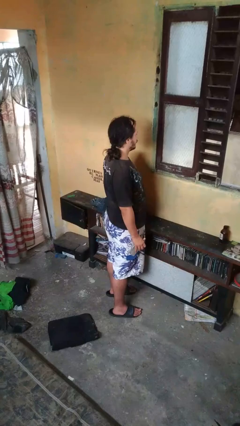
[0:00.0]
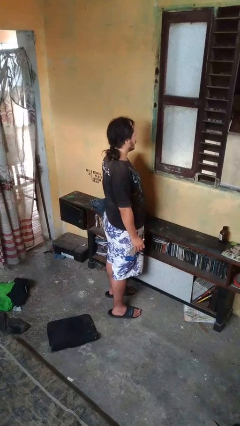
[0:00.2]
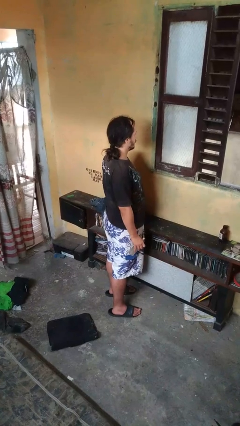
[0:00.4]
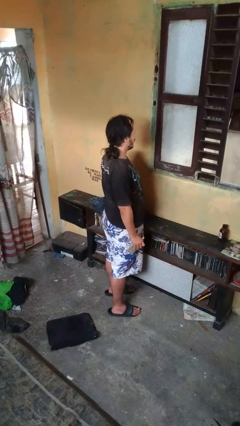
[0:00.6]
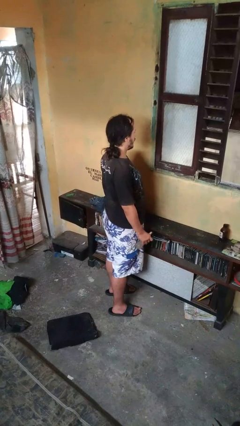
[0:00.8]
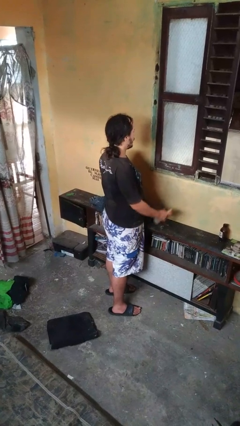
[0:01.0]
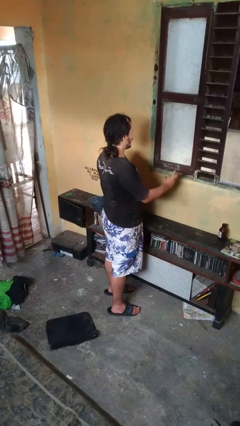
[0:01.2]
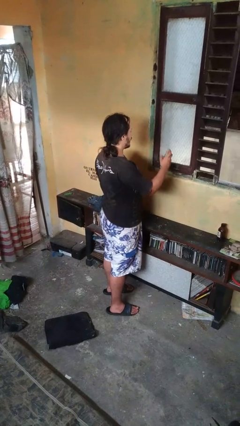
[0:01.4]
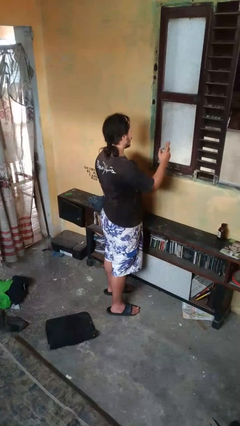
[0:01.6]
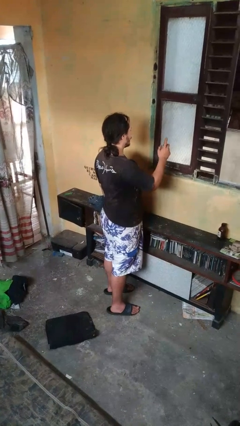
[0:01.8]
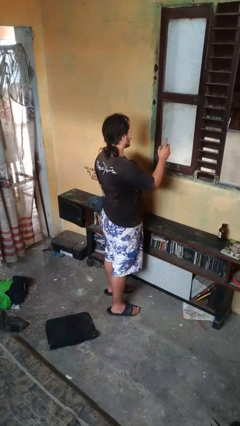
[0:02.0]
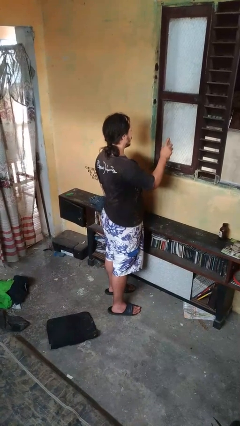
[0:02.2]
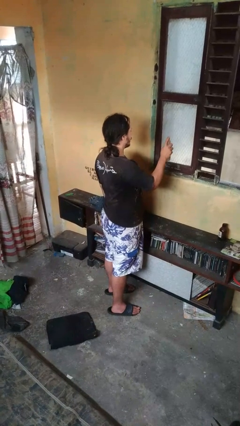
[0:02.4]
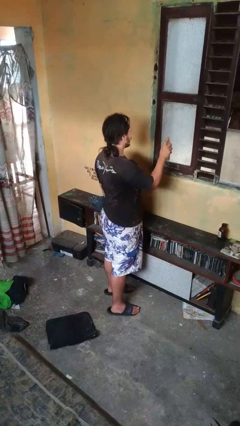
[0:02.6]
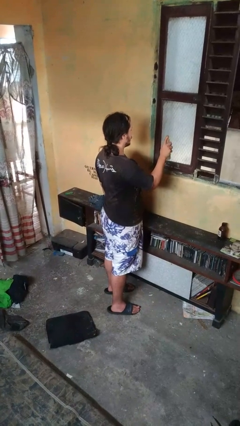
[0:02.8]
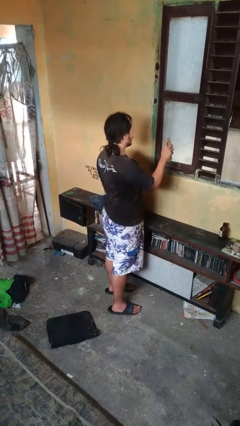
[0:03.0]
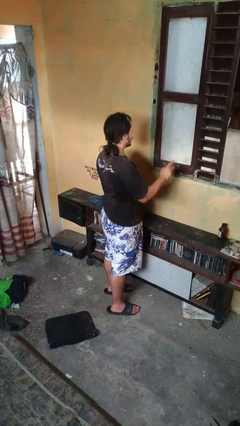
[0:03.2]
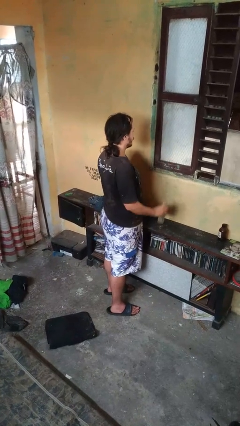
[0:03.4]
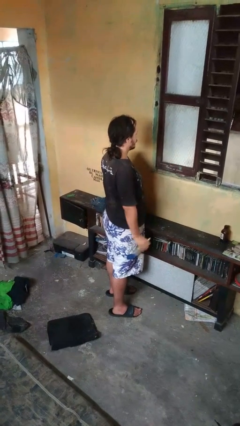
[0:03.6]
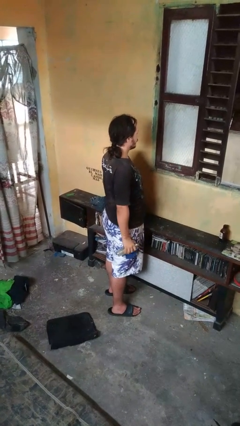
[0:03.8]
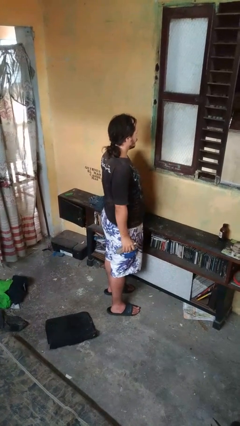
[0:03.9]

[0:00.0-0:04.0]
person sprays from bottle

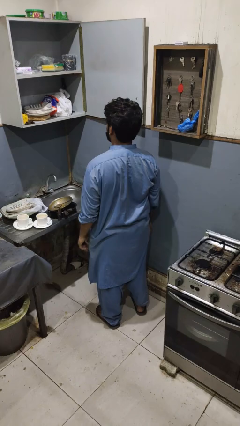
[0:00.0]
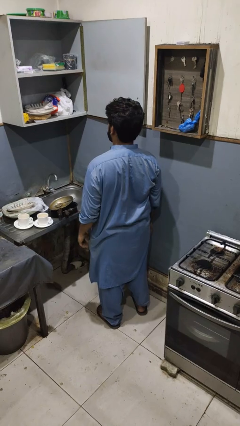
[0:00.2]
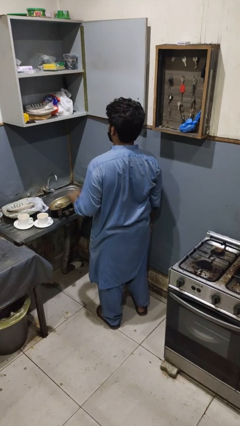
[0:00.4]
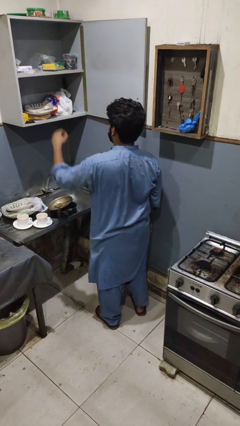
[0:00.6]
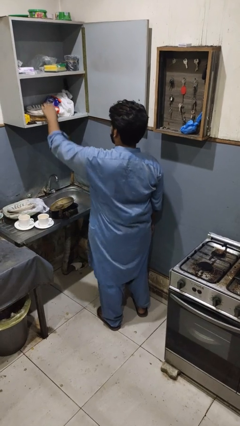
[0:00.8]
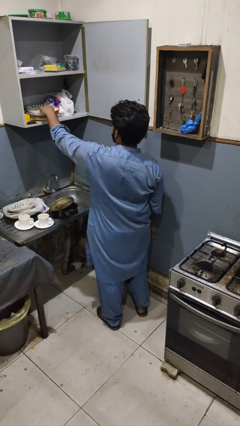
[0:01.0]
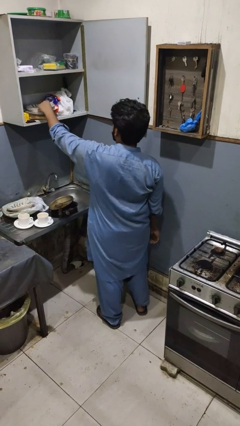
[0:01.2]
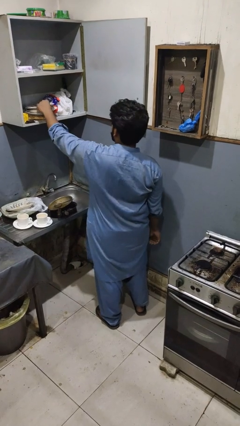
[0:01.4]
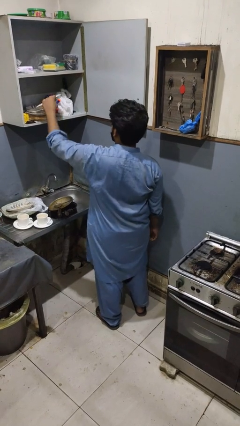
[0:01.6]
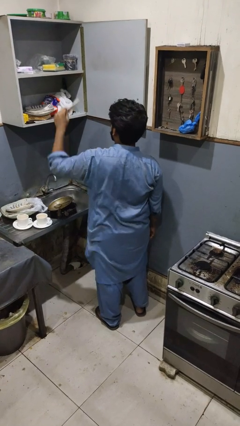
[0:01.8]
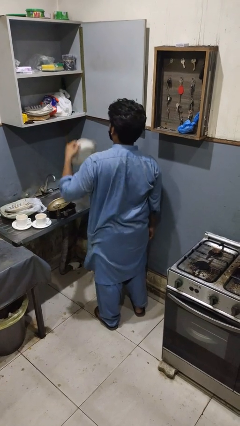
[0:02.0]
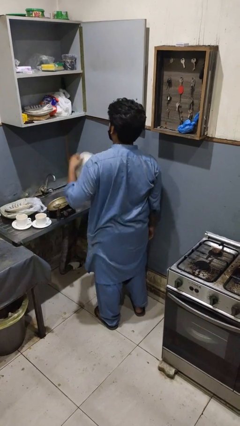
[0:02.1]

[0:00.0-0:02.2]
person takes object from cabinet

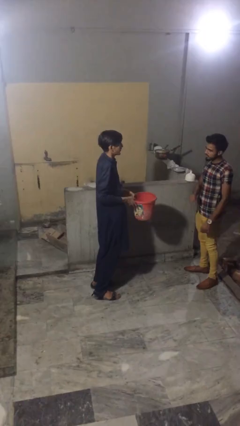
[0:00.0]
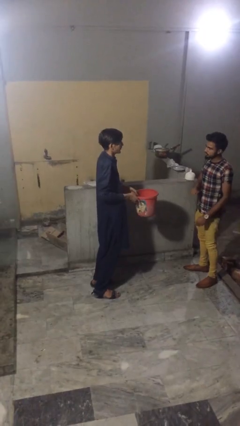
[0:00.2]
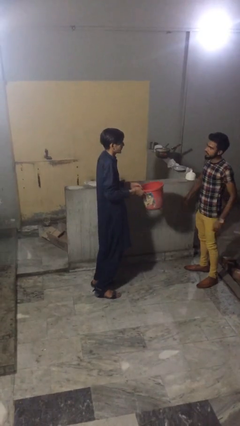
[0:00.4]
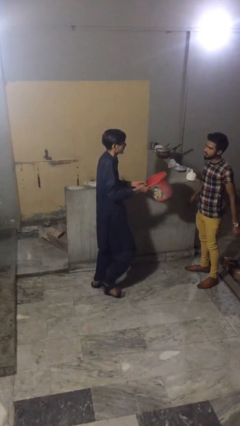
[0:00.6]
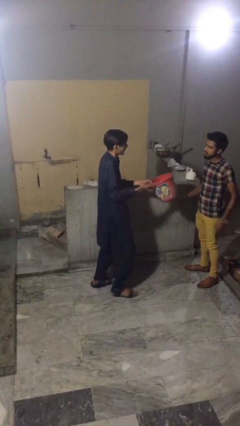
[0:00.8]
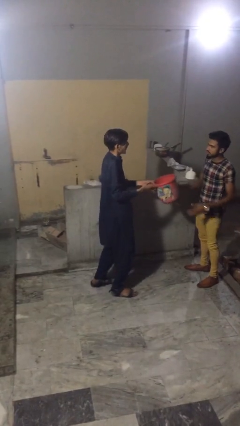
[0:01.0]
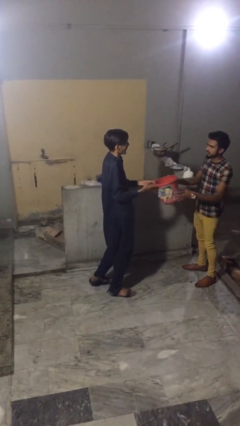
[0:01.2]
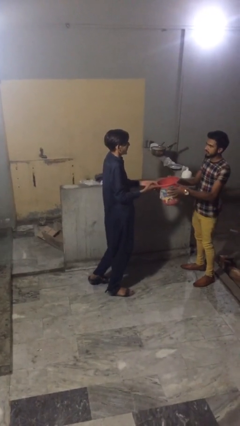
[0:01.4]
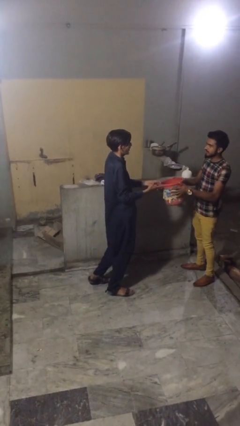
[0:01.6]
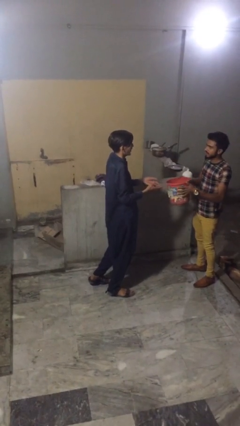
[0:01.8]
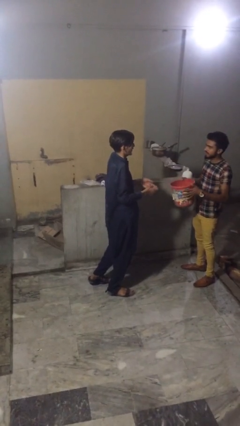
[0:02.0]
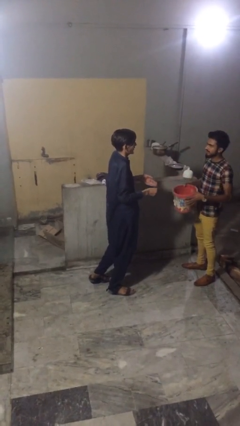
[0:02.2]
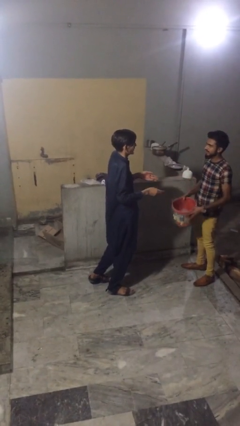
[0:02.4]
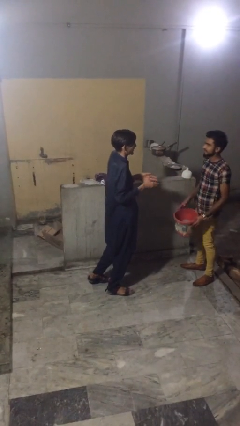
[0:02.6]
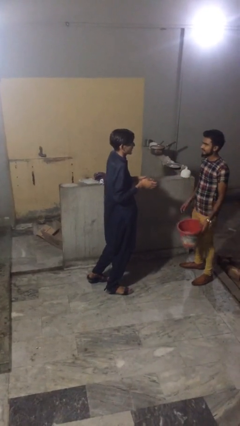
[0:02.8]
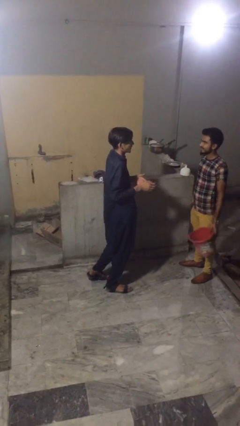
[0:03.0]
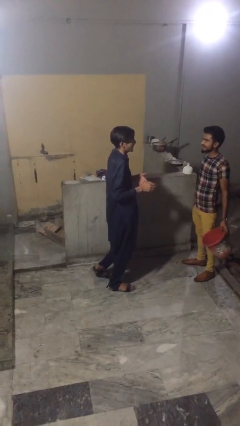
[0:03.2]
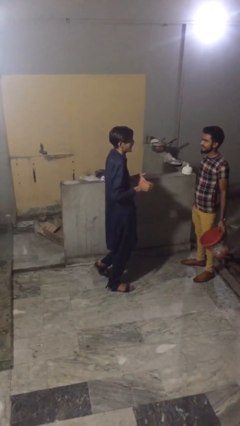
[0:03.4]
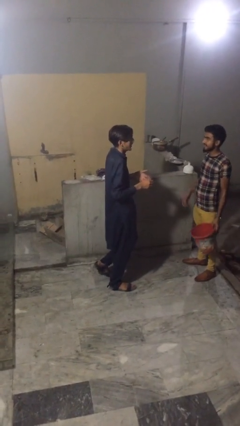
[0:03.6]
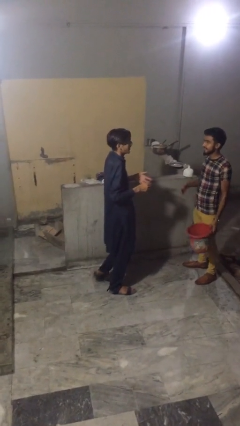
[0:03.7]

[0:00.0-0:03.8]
person transfers object to person

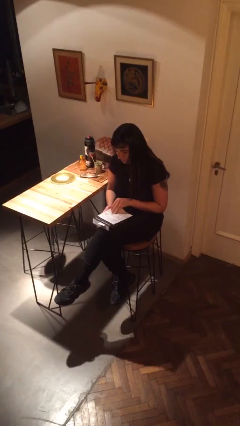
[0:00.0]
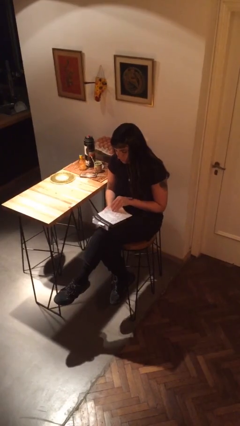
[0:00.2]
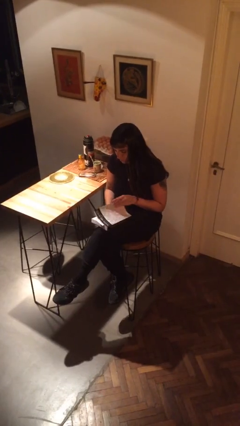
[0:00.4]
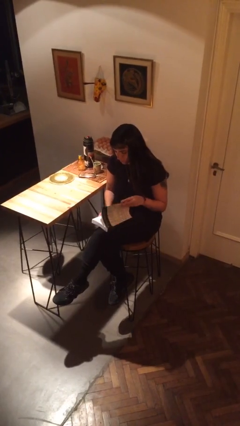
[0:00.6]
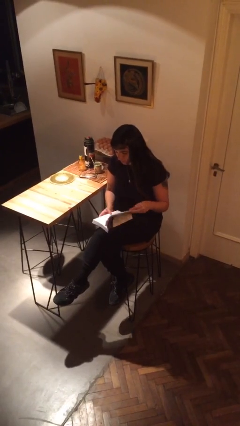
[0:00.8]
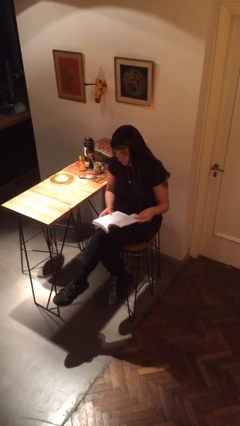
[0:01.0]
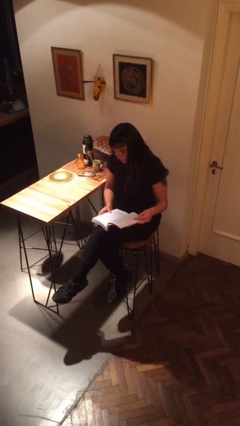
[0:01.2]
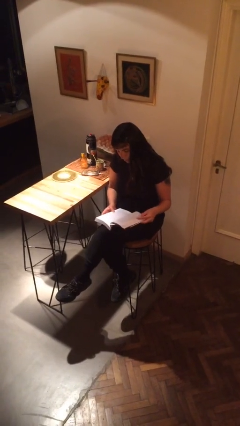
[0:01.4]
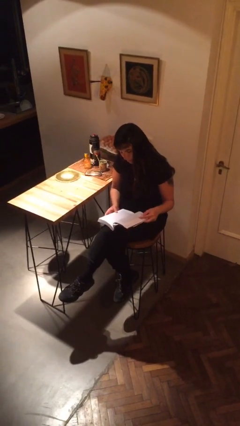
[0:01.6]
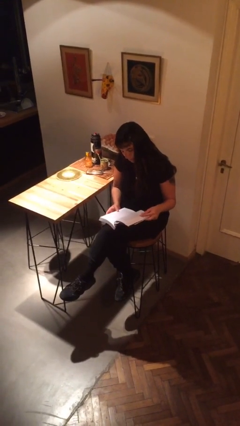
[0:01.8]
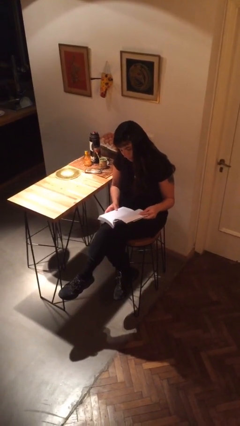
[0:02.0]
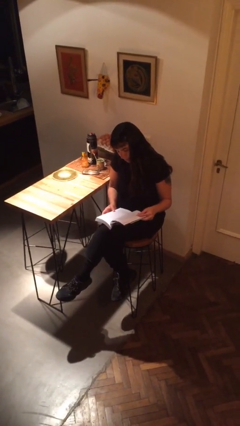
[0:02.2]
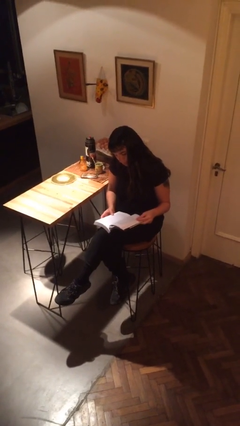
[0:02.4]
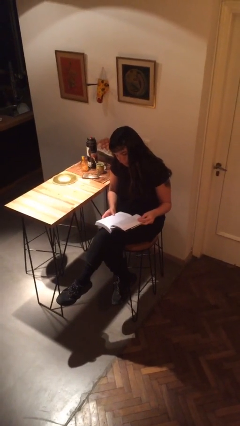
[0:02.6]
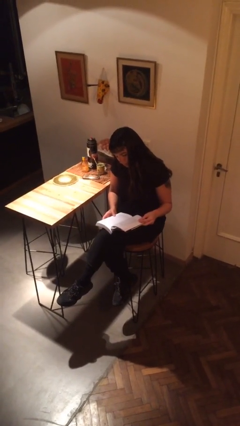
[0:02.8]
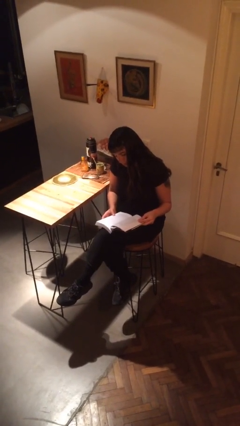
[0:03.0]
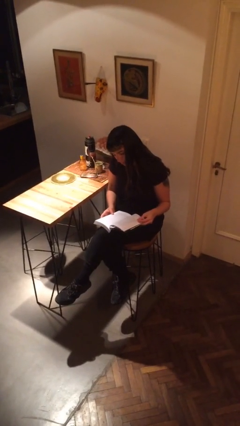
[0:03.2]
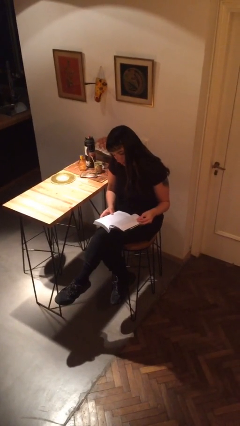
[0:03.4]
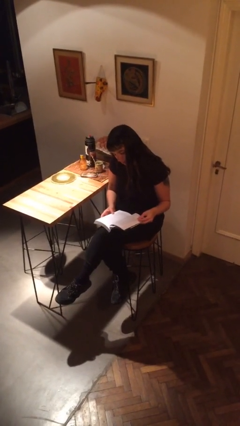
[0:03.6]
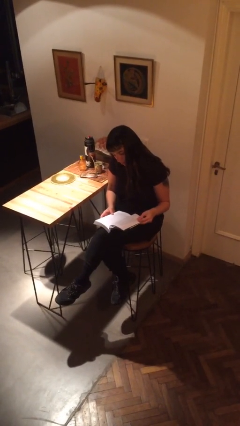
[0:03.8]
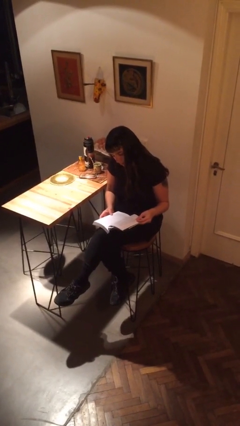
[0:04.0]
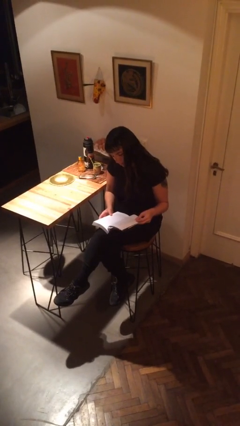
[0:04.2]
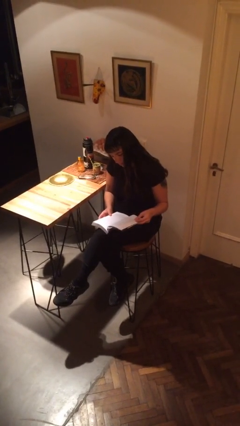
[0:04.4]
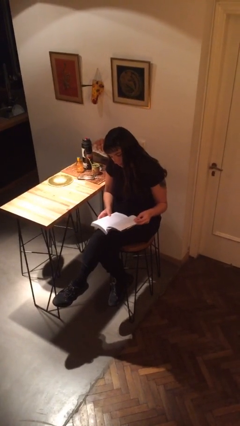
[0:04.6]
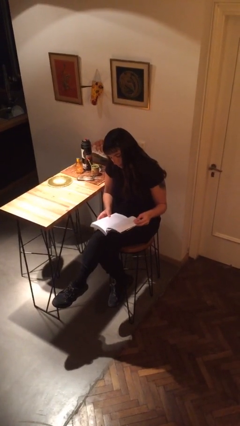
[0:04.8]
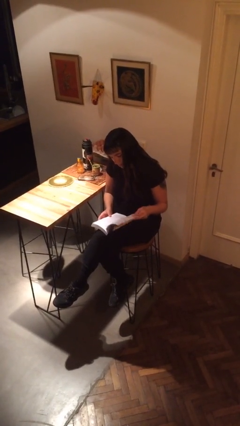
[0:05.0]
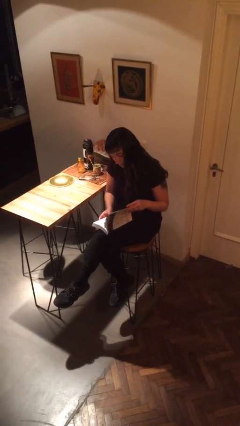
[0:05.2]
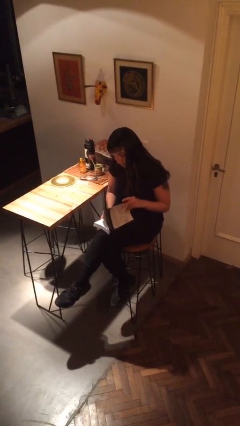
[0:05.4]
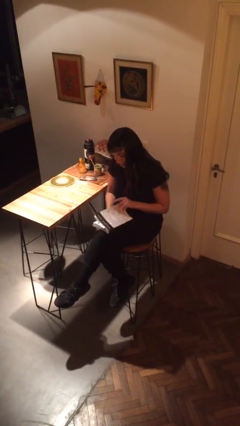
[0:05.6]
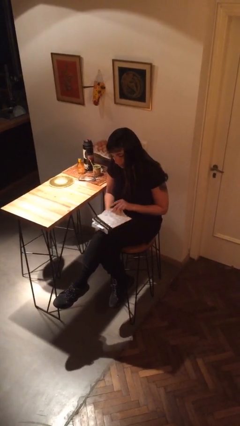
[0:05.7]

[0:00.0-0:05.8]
person reads book

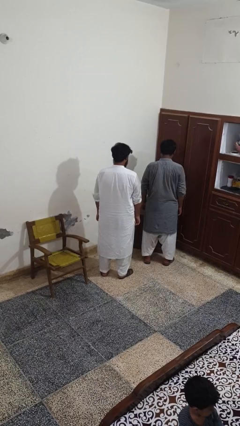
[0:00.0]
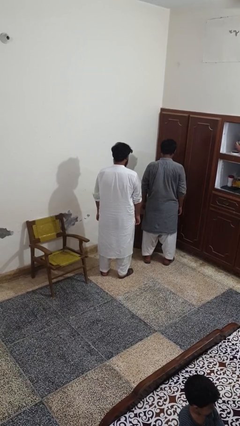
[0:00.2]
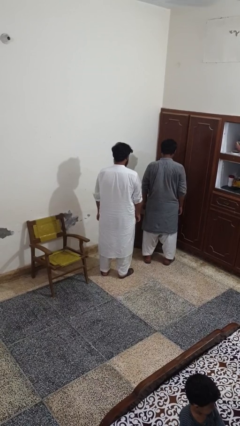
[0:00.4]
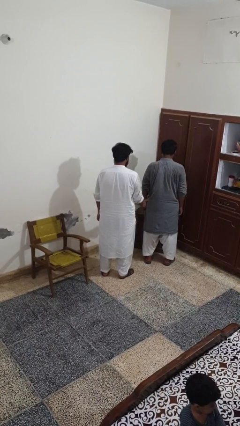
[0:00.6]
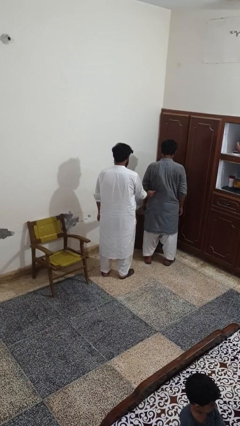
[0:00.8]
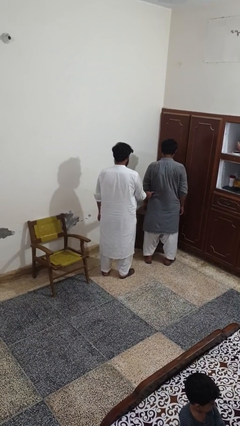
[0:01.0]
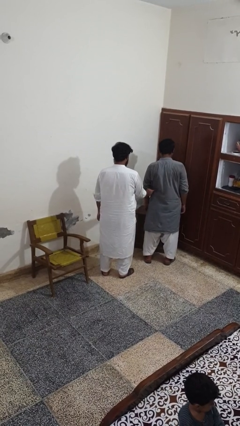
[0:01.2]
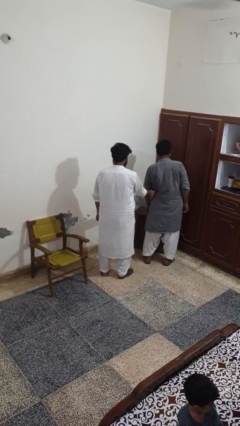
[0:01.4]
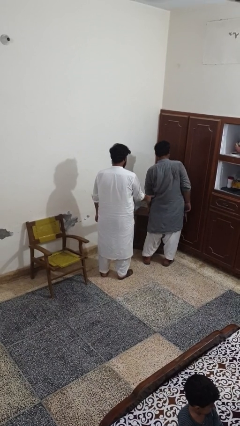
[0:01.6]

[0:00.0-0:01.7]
person tickles person

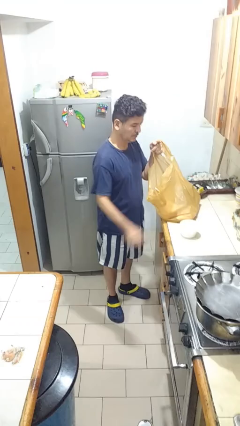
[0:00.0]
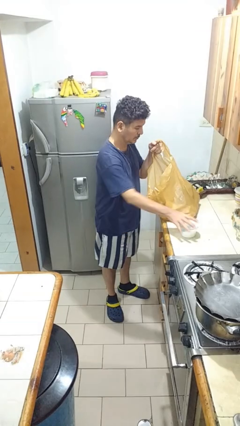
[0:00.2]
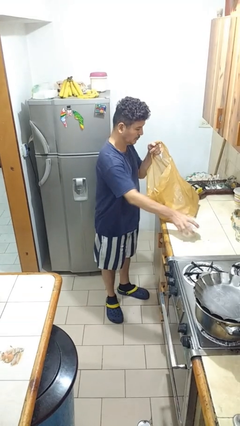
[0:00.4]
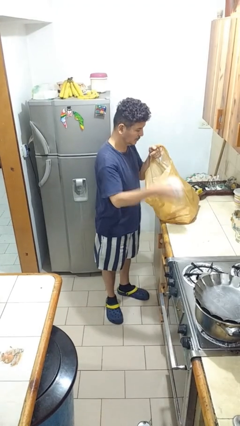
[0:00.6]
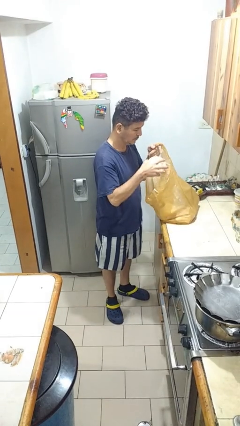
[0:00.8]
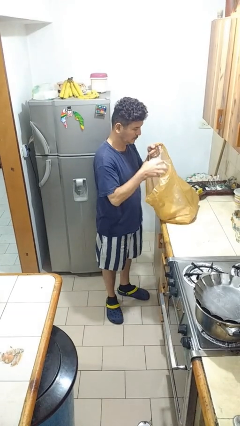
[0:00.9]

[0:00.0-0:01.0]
person puts object into bag
